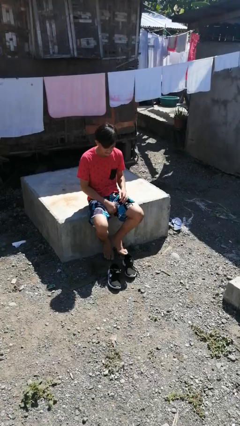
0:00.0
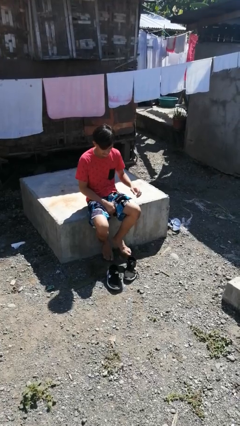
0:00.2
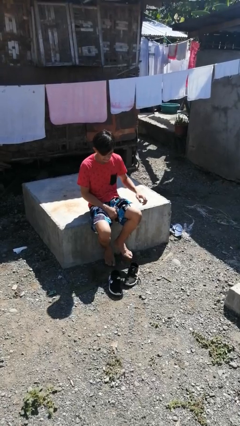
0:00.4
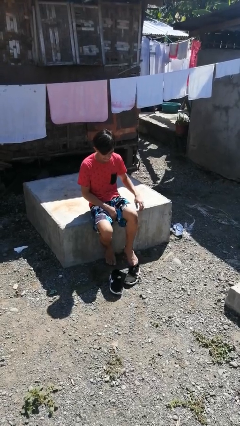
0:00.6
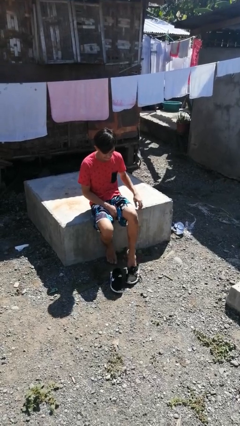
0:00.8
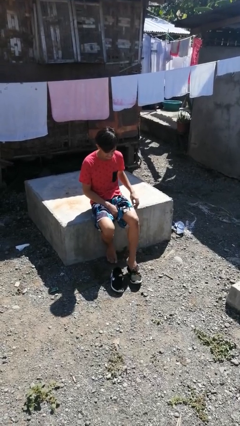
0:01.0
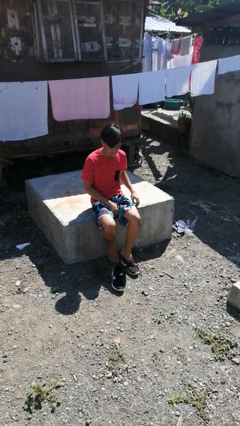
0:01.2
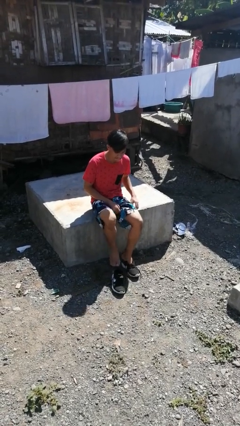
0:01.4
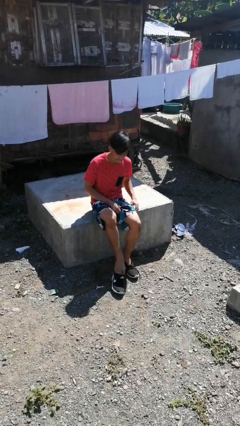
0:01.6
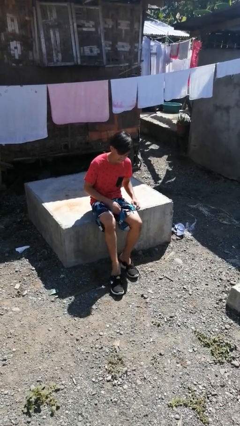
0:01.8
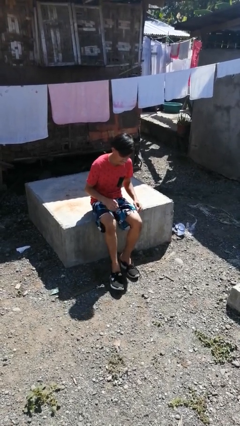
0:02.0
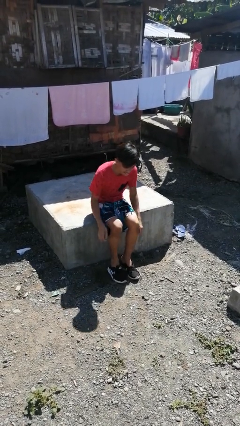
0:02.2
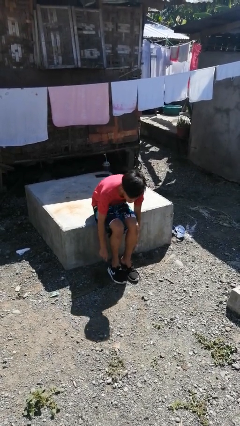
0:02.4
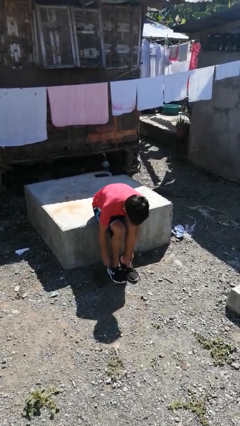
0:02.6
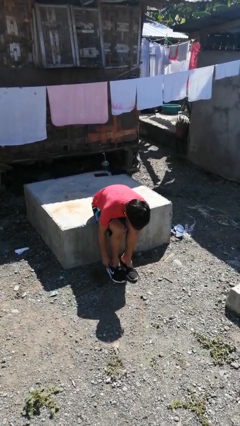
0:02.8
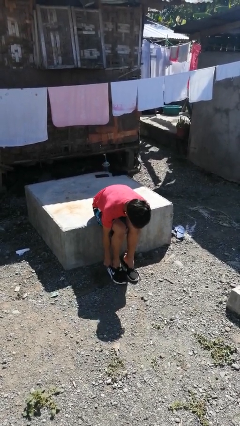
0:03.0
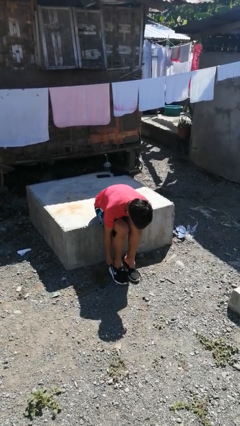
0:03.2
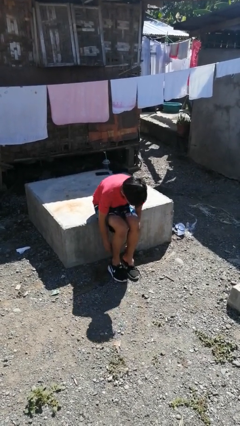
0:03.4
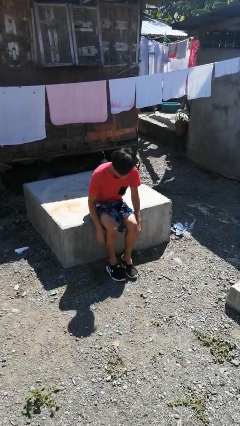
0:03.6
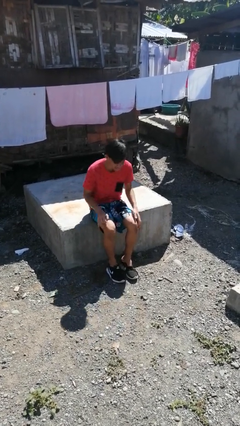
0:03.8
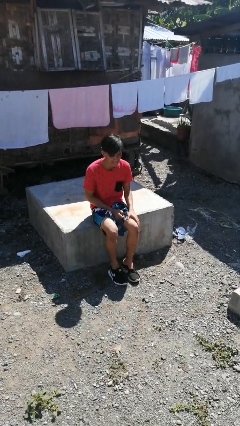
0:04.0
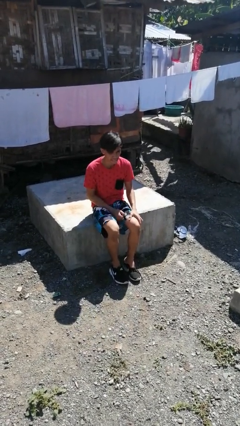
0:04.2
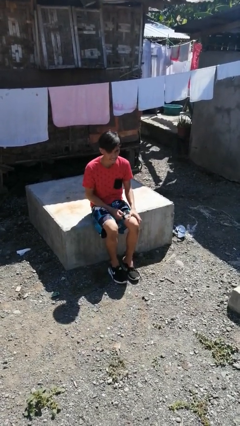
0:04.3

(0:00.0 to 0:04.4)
person puts on shoes

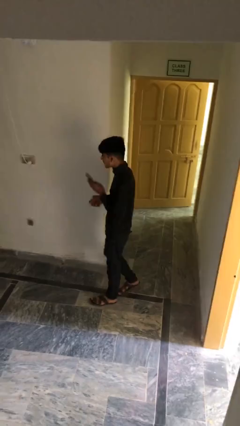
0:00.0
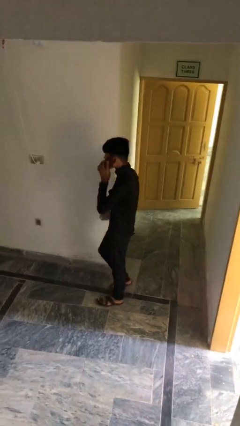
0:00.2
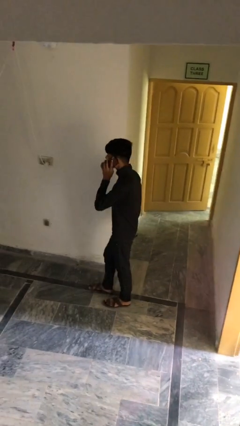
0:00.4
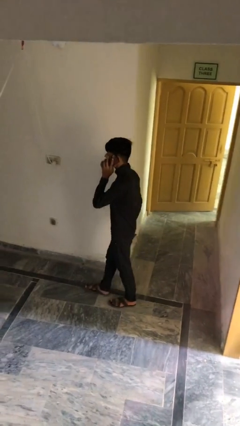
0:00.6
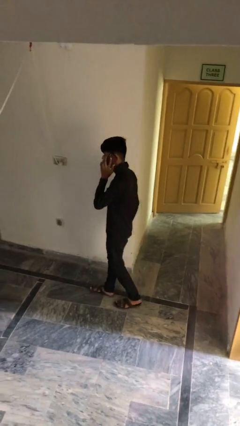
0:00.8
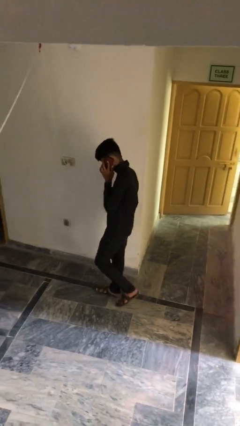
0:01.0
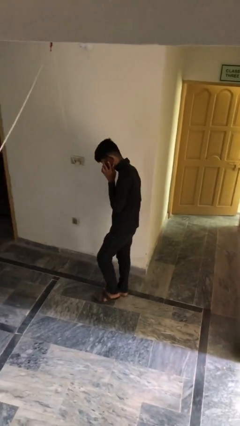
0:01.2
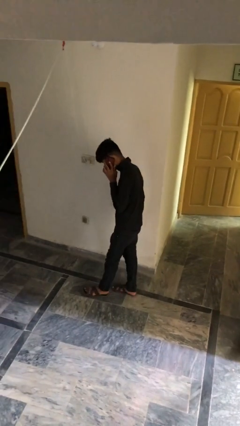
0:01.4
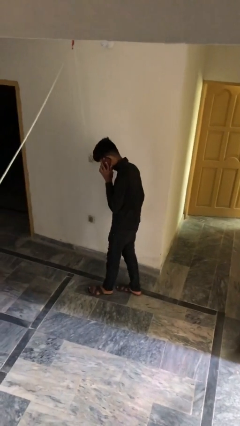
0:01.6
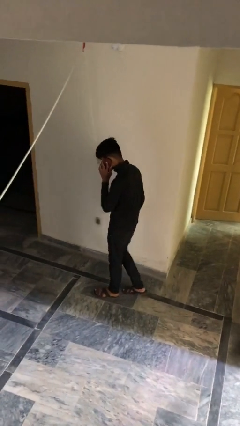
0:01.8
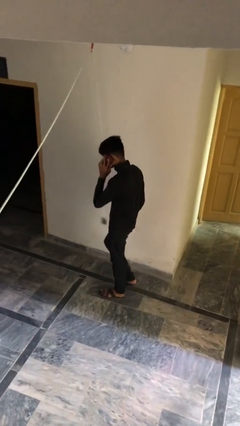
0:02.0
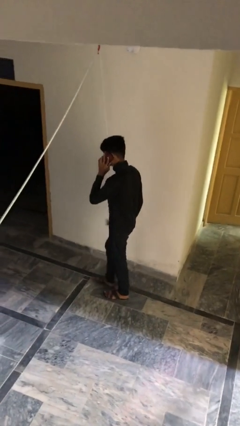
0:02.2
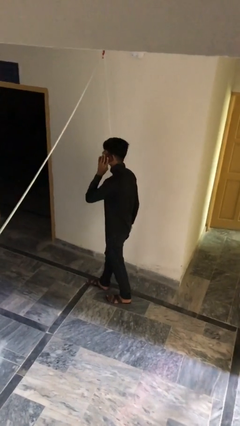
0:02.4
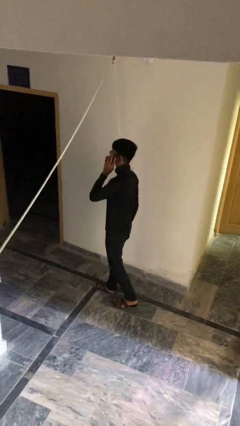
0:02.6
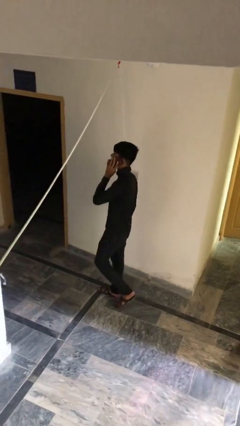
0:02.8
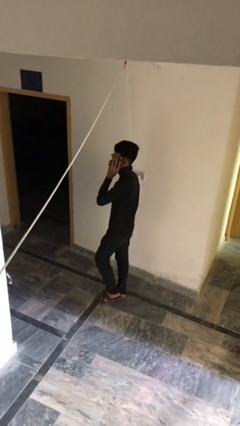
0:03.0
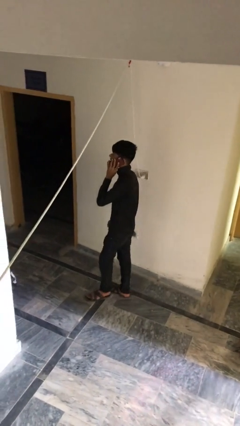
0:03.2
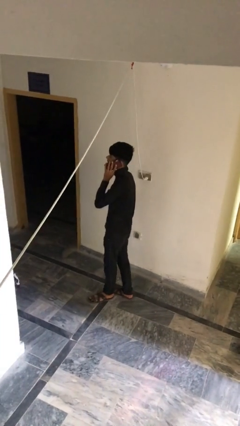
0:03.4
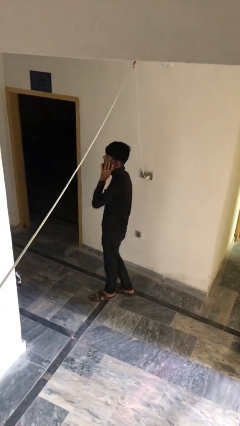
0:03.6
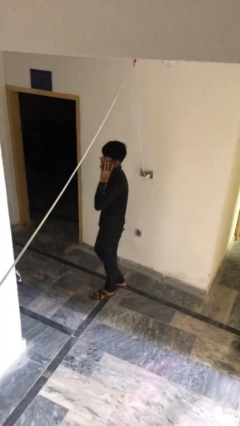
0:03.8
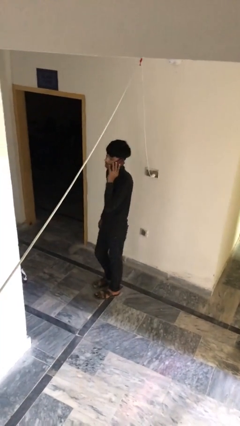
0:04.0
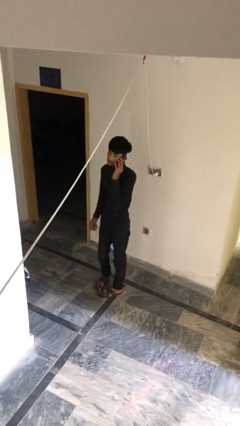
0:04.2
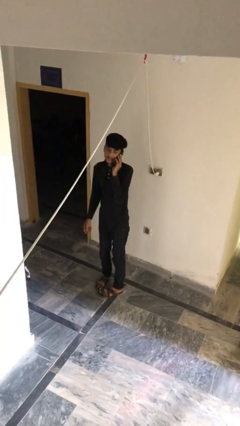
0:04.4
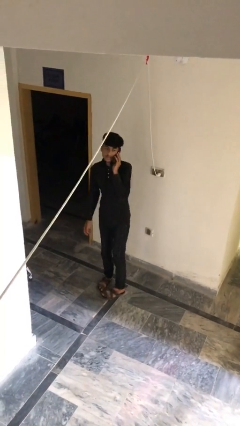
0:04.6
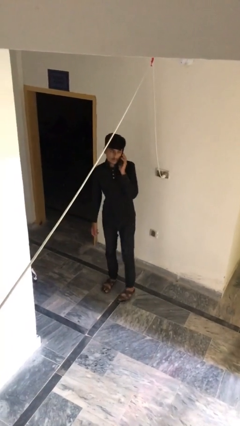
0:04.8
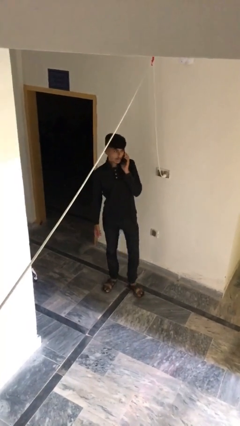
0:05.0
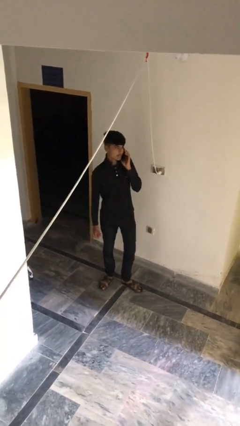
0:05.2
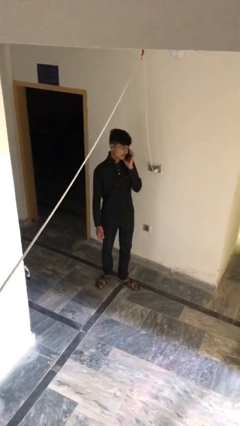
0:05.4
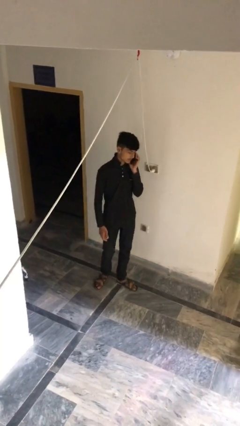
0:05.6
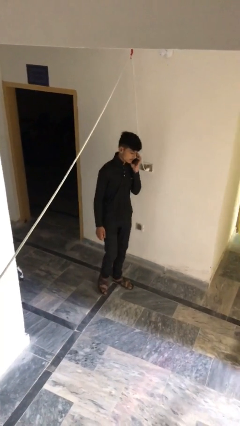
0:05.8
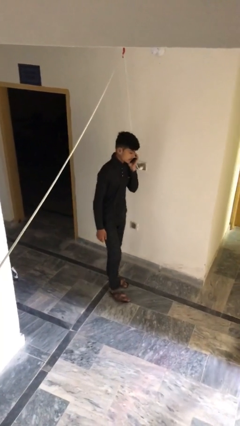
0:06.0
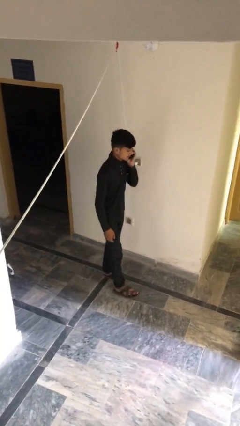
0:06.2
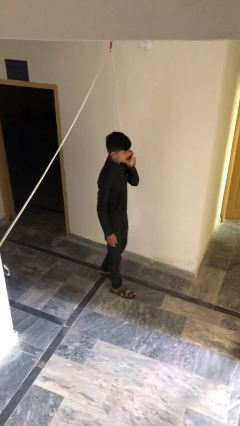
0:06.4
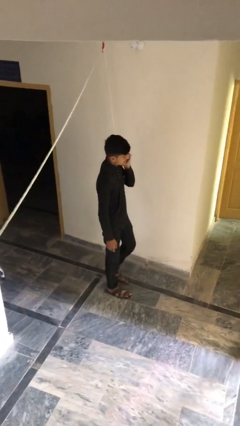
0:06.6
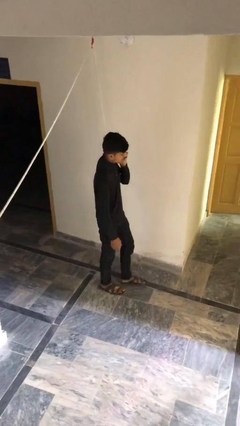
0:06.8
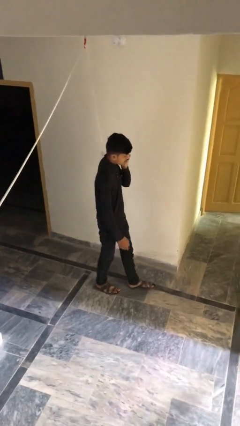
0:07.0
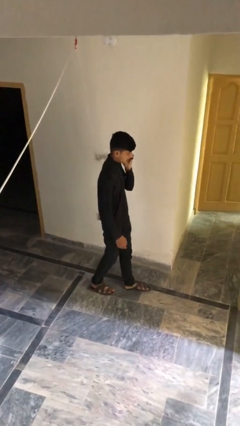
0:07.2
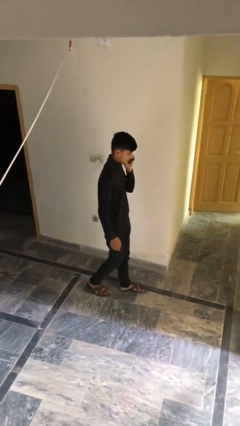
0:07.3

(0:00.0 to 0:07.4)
person talks on phone

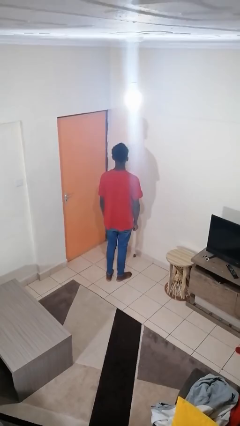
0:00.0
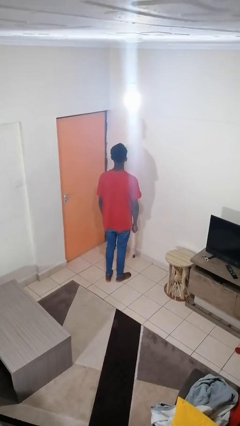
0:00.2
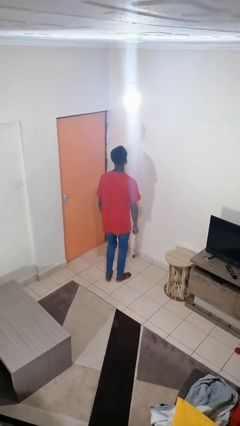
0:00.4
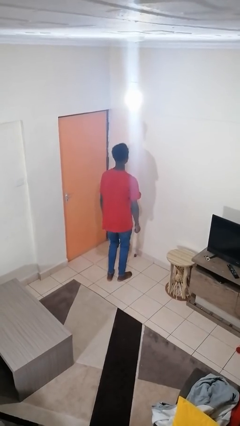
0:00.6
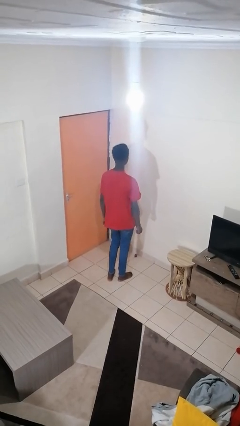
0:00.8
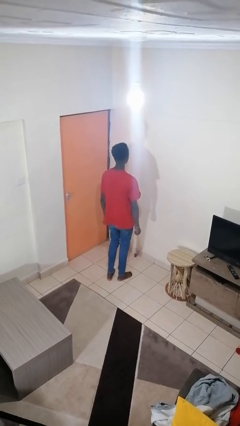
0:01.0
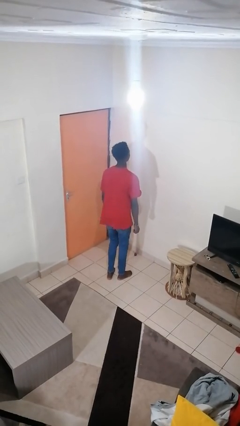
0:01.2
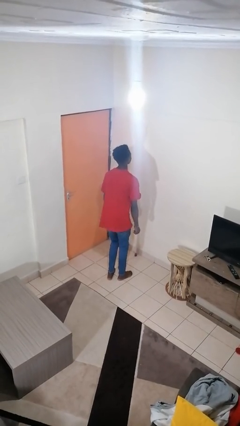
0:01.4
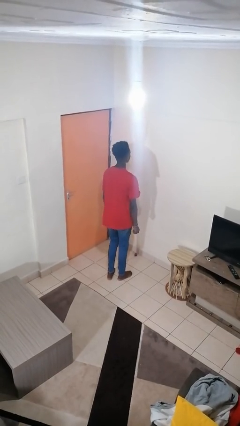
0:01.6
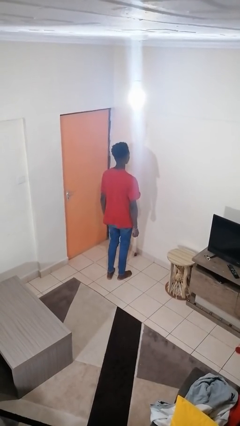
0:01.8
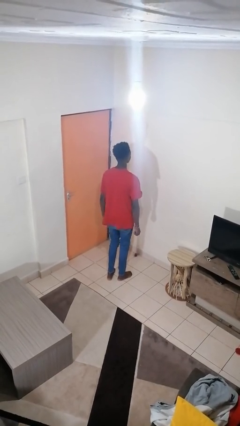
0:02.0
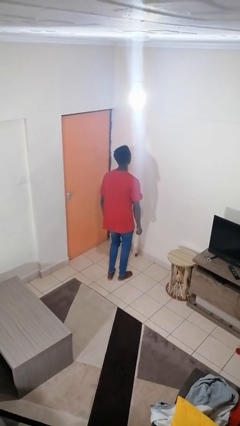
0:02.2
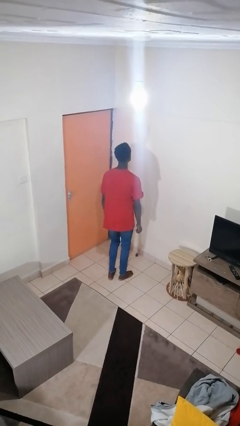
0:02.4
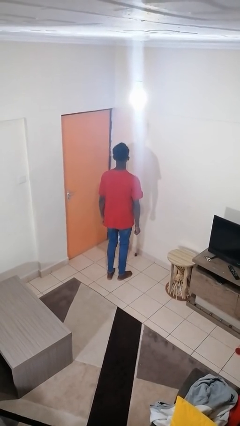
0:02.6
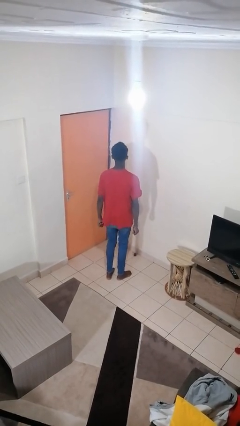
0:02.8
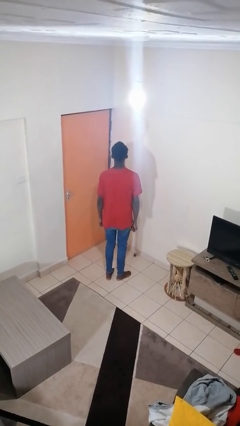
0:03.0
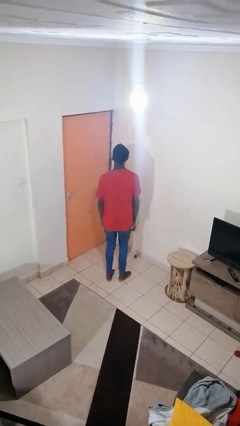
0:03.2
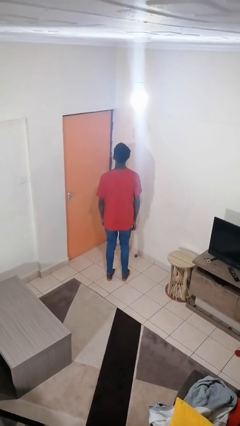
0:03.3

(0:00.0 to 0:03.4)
person wiggles hips

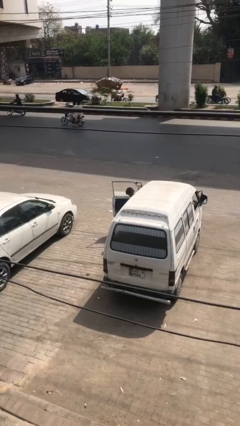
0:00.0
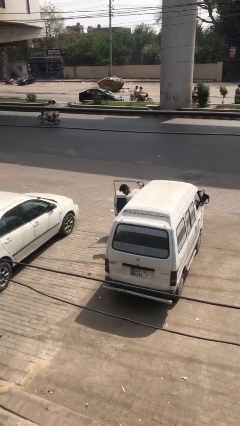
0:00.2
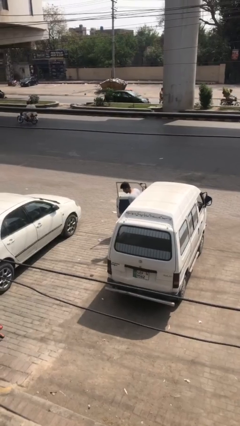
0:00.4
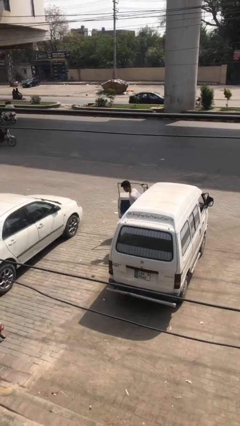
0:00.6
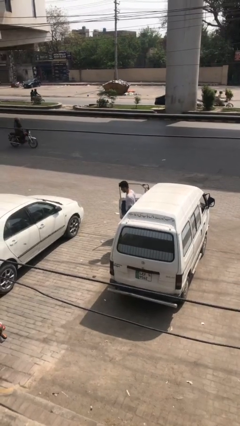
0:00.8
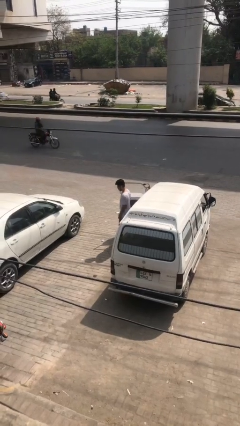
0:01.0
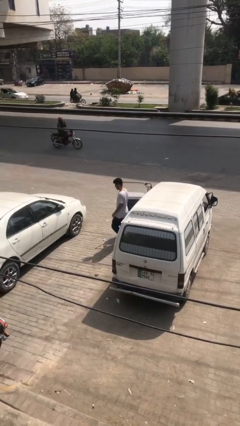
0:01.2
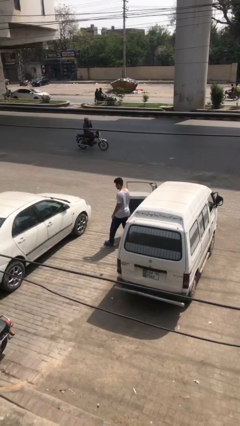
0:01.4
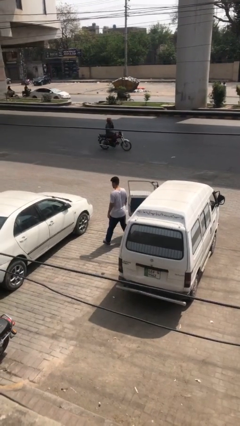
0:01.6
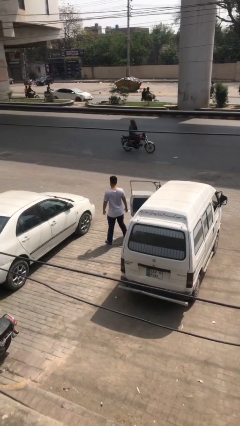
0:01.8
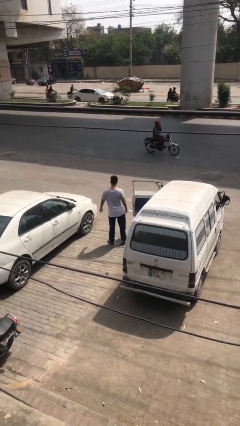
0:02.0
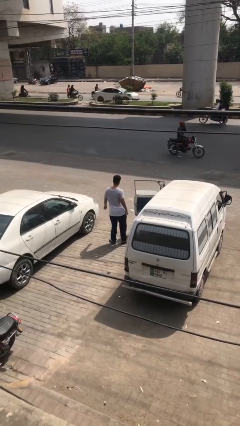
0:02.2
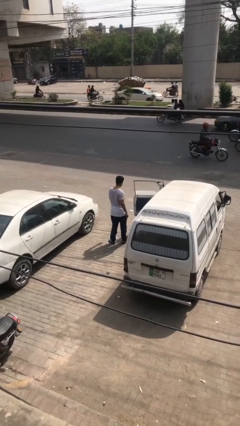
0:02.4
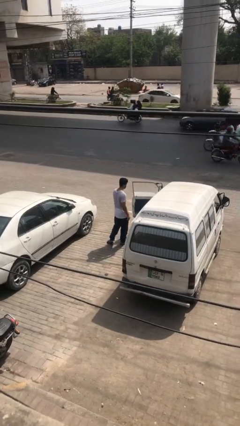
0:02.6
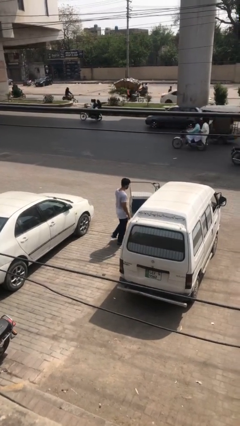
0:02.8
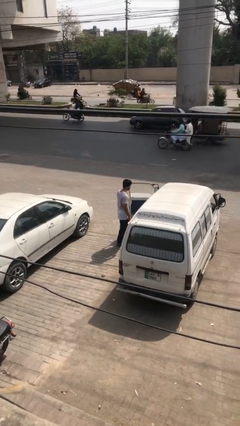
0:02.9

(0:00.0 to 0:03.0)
person exits car
